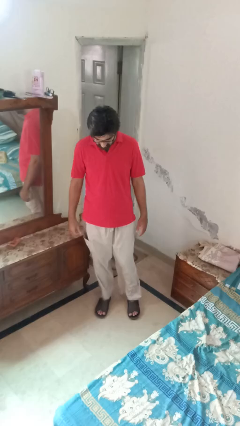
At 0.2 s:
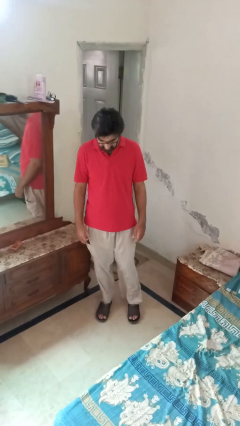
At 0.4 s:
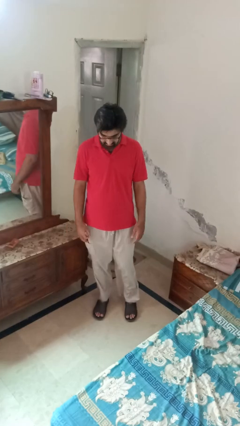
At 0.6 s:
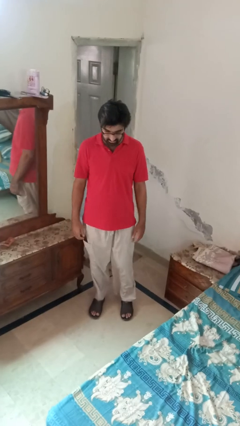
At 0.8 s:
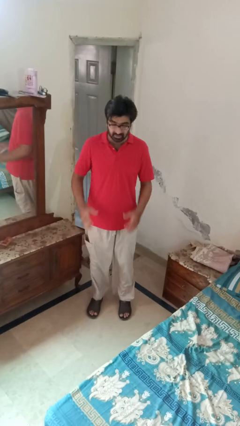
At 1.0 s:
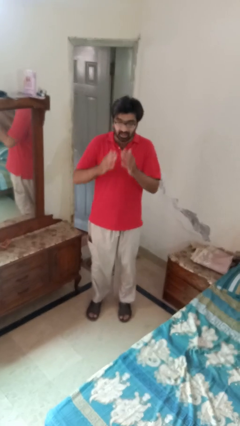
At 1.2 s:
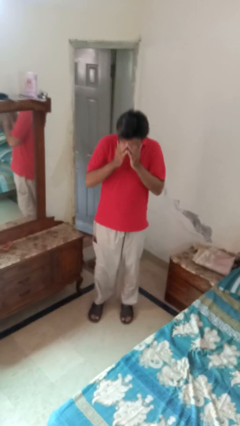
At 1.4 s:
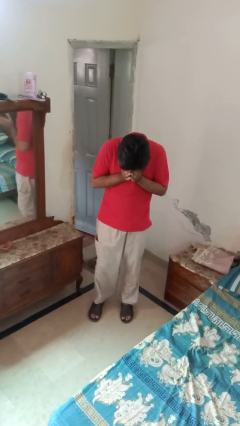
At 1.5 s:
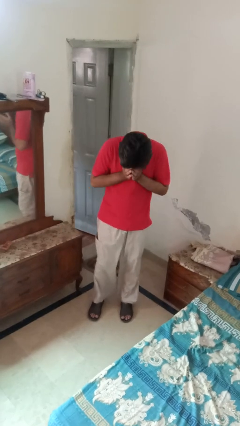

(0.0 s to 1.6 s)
person sneezes into hand

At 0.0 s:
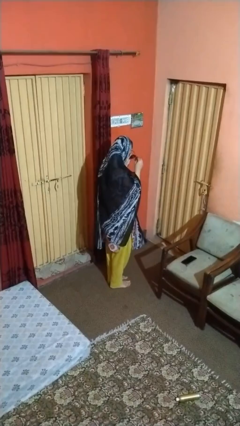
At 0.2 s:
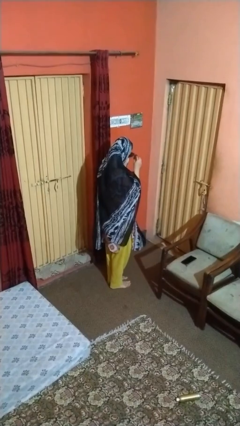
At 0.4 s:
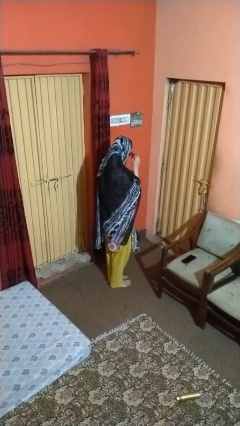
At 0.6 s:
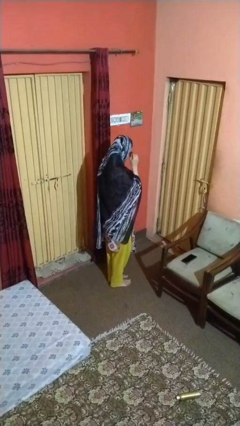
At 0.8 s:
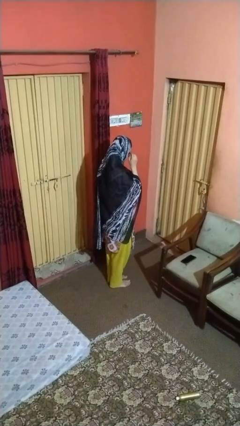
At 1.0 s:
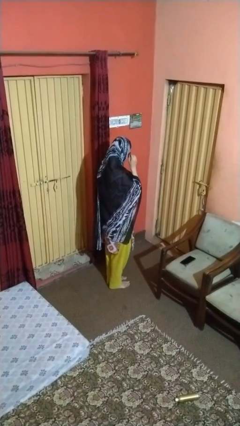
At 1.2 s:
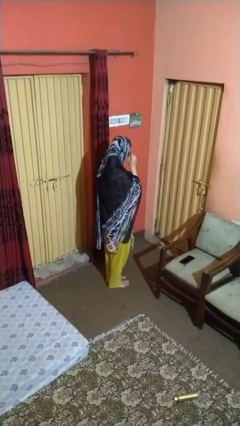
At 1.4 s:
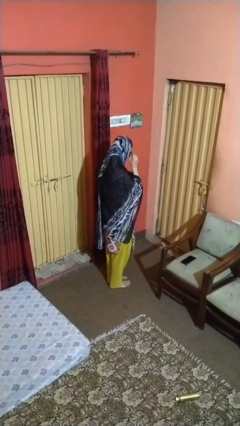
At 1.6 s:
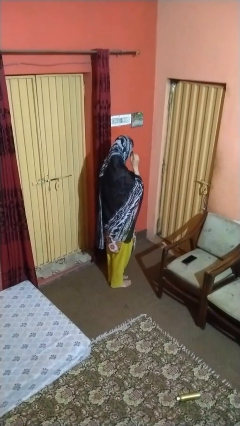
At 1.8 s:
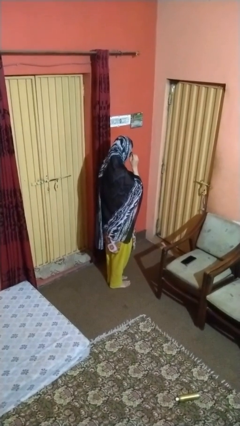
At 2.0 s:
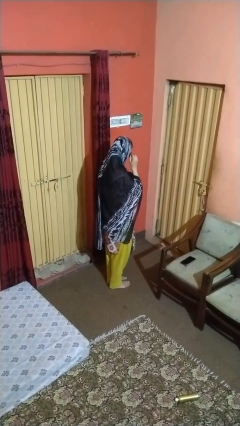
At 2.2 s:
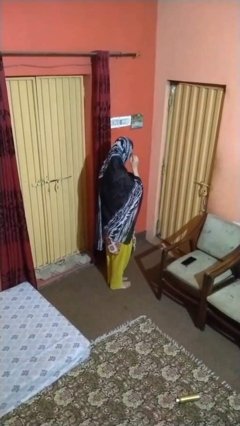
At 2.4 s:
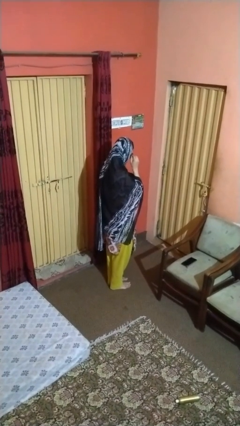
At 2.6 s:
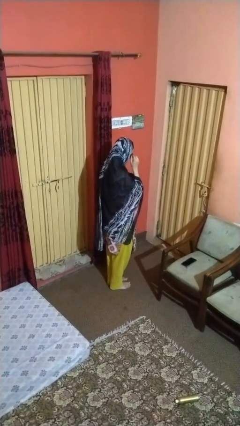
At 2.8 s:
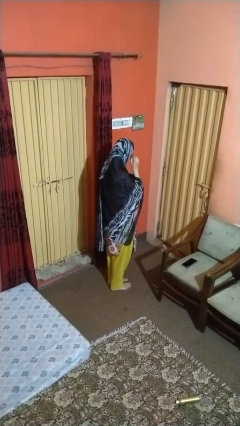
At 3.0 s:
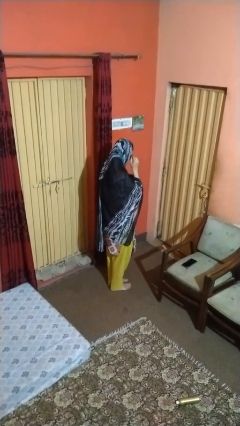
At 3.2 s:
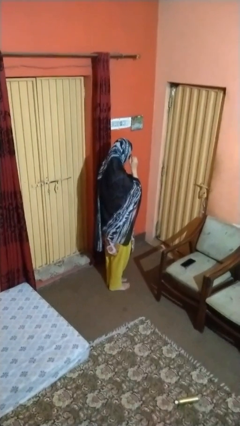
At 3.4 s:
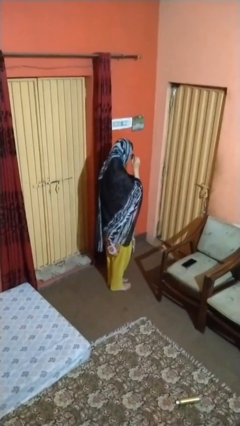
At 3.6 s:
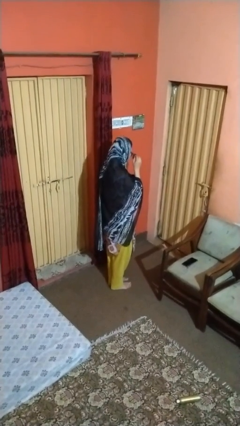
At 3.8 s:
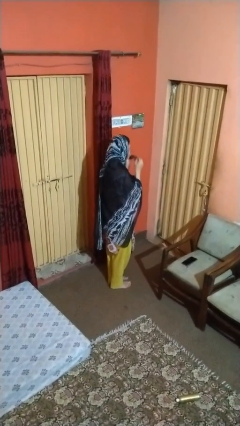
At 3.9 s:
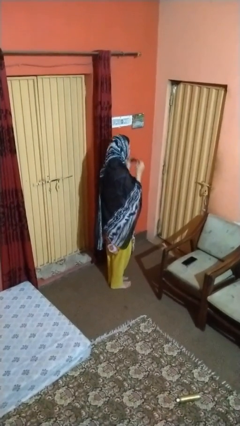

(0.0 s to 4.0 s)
person puts on sunglasses

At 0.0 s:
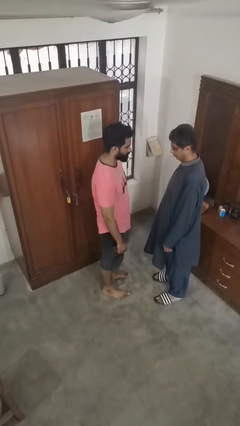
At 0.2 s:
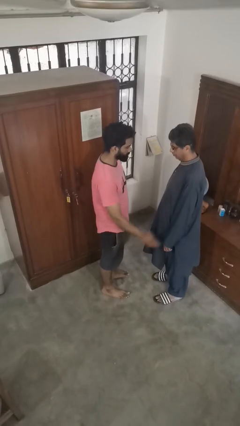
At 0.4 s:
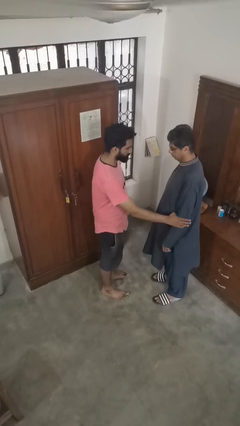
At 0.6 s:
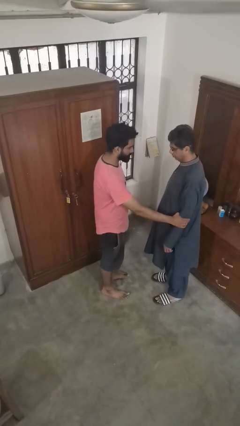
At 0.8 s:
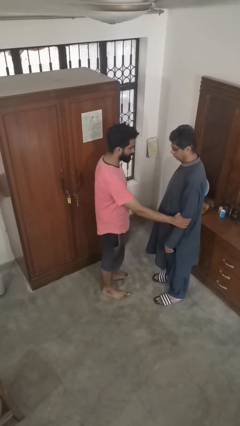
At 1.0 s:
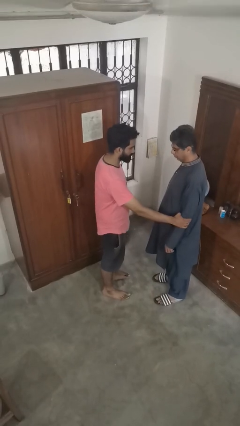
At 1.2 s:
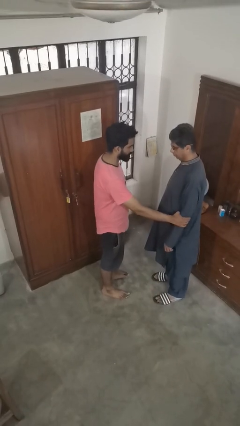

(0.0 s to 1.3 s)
person grabs person by forearm

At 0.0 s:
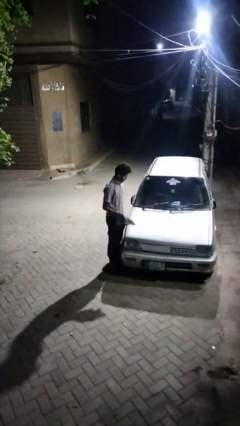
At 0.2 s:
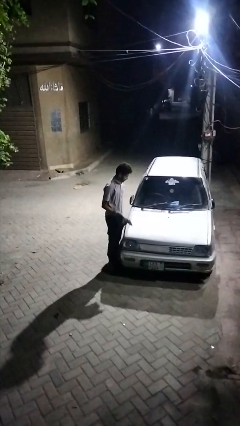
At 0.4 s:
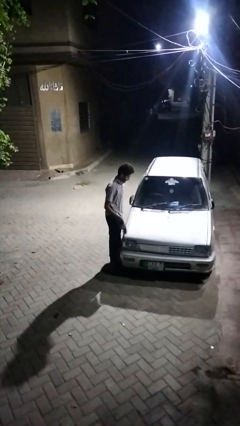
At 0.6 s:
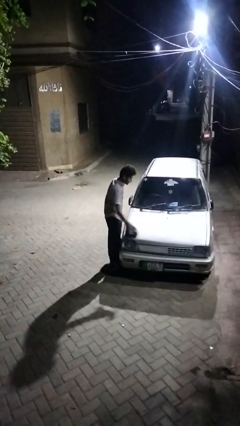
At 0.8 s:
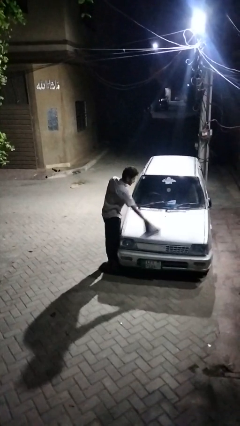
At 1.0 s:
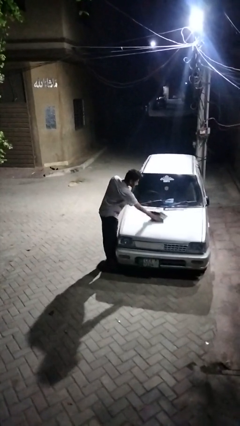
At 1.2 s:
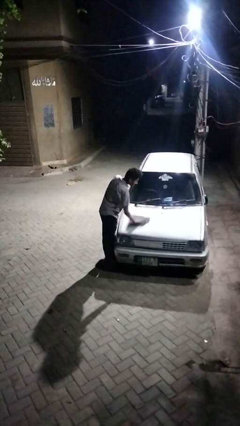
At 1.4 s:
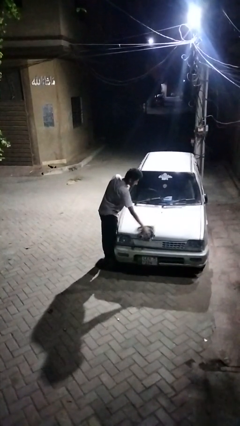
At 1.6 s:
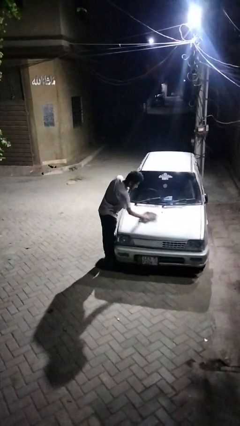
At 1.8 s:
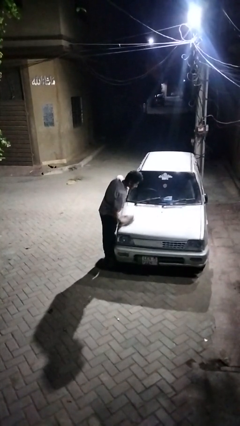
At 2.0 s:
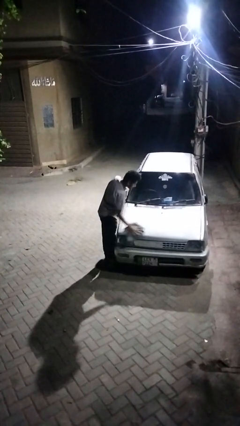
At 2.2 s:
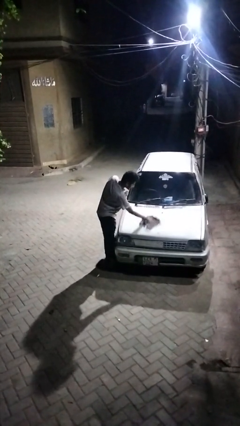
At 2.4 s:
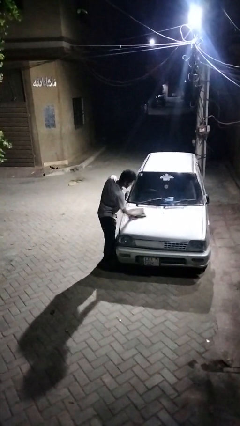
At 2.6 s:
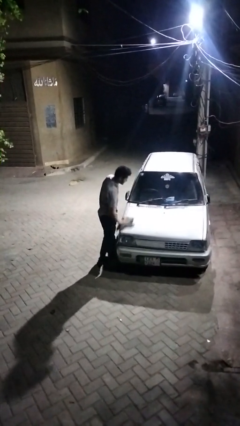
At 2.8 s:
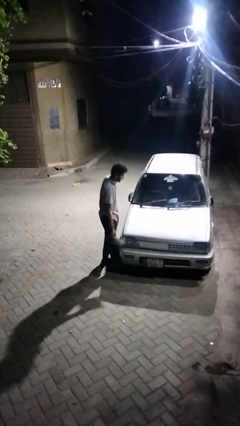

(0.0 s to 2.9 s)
person polishes car with rag

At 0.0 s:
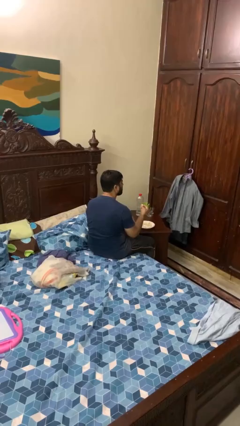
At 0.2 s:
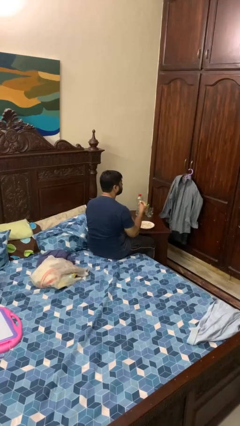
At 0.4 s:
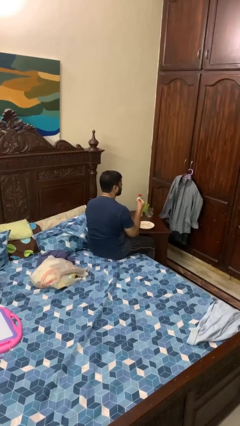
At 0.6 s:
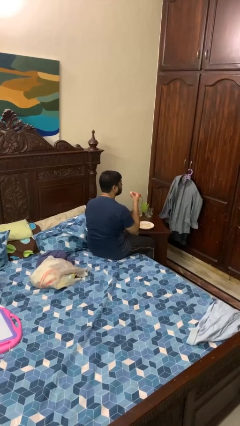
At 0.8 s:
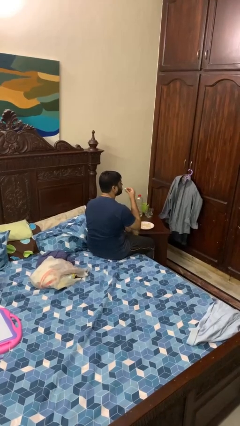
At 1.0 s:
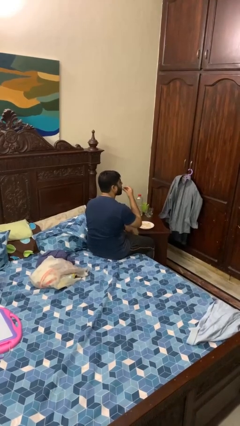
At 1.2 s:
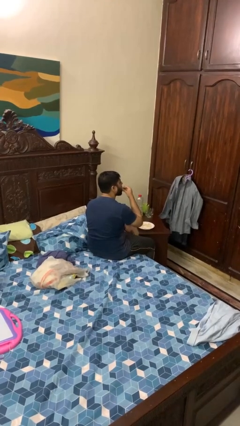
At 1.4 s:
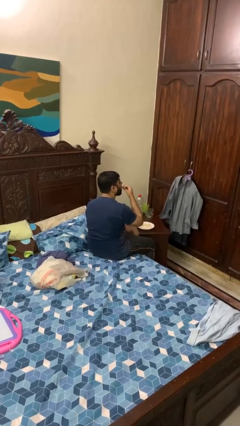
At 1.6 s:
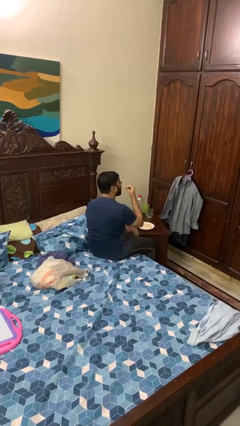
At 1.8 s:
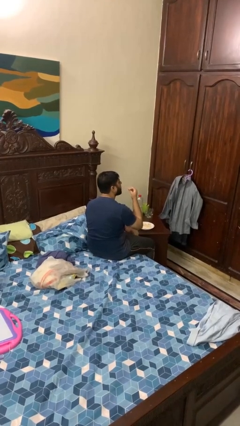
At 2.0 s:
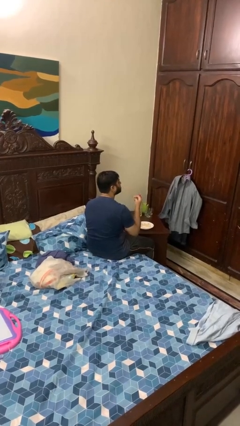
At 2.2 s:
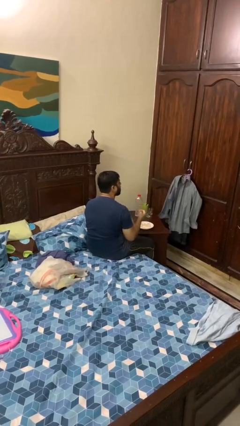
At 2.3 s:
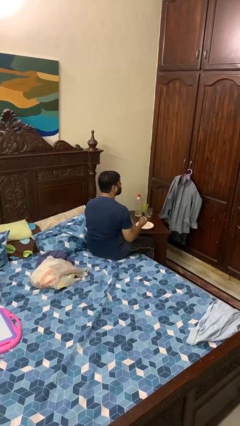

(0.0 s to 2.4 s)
person eats with hands

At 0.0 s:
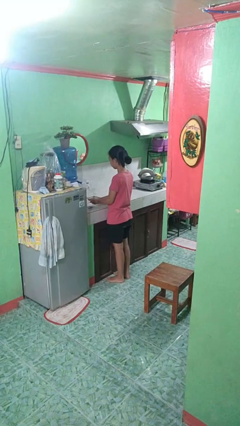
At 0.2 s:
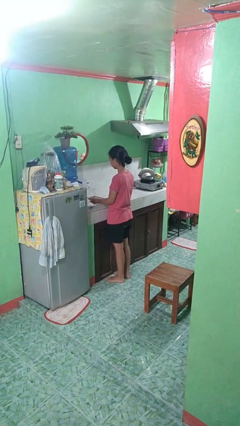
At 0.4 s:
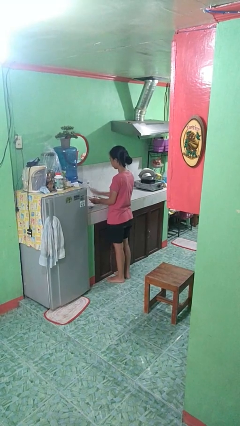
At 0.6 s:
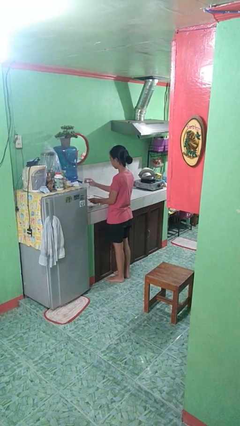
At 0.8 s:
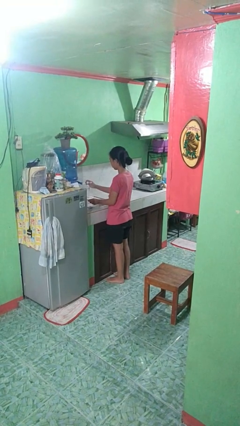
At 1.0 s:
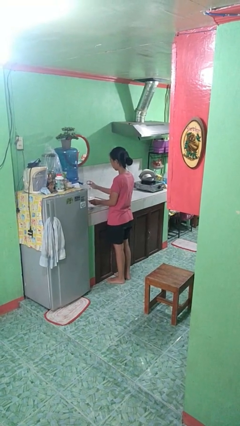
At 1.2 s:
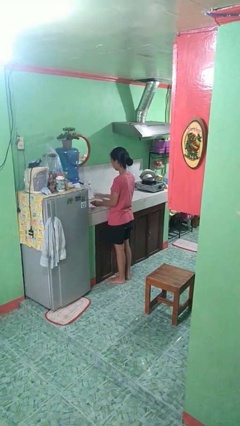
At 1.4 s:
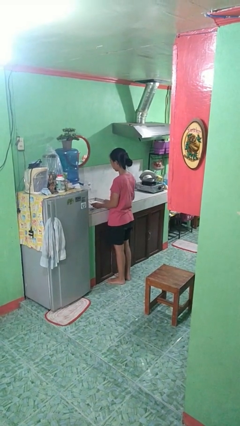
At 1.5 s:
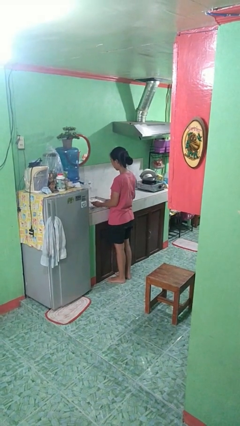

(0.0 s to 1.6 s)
person washes dish

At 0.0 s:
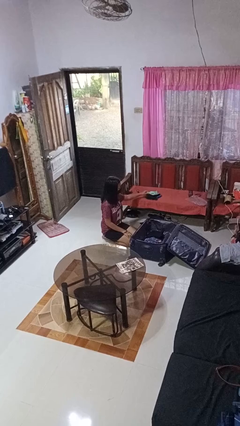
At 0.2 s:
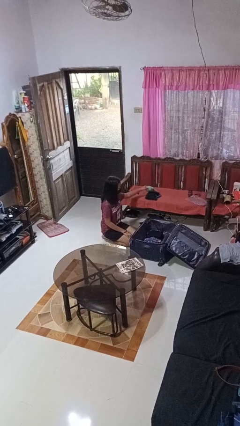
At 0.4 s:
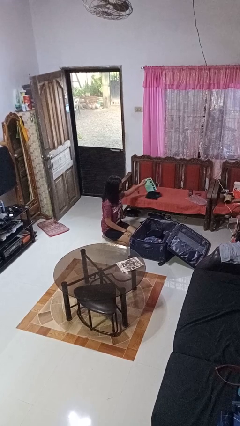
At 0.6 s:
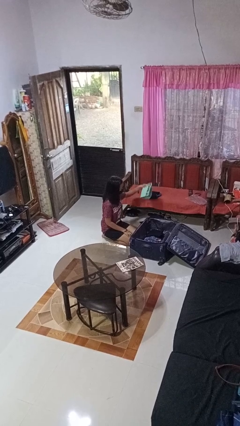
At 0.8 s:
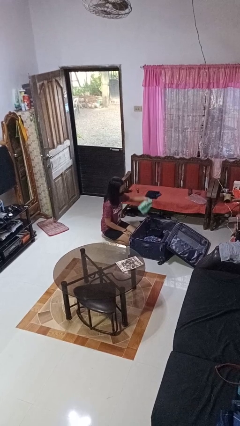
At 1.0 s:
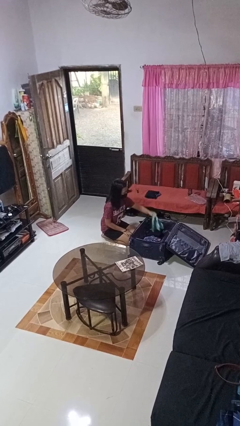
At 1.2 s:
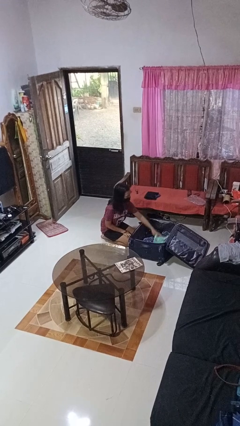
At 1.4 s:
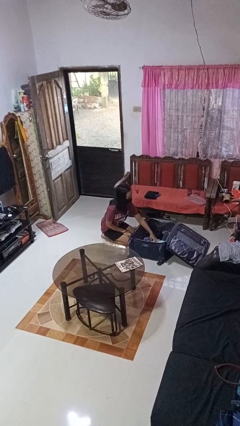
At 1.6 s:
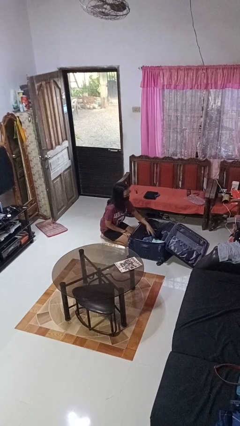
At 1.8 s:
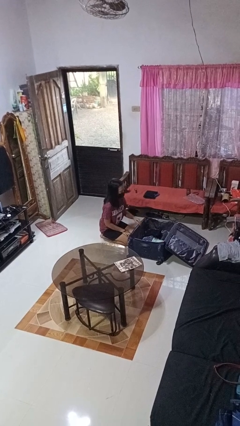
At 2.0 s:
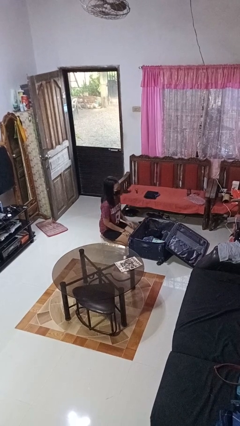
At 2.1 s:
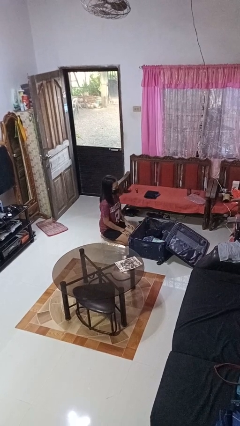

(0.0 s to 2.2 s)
person loads clothes into suitcase

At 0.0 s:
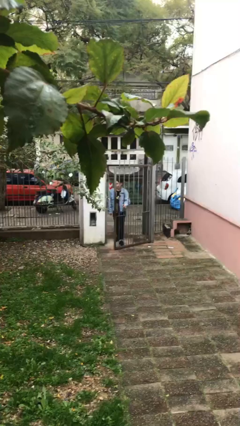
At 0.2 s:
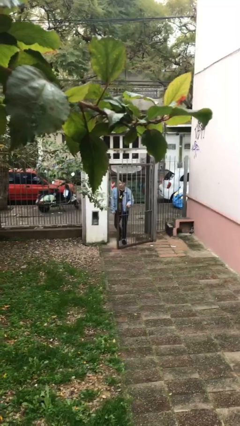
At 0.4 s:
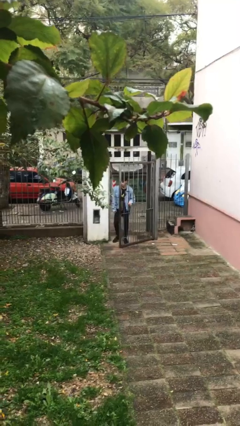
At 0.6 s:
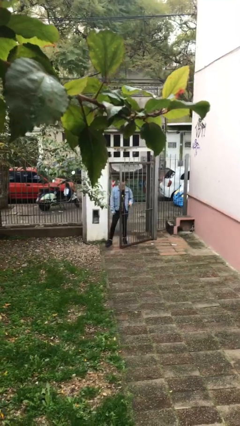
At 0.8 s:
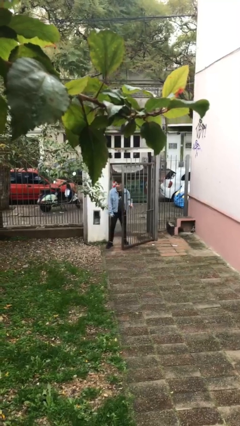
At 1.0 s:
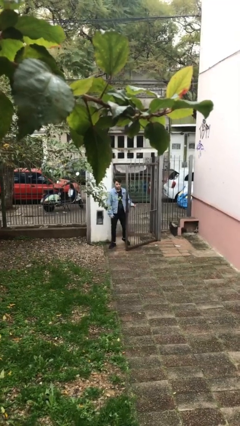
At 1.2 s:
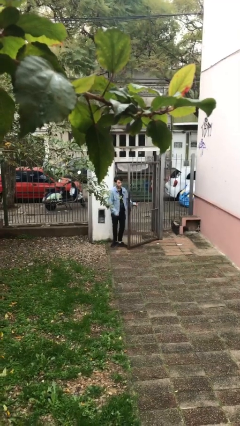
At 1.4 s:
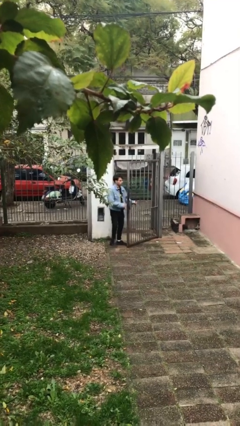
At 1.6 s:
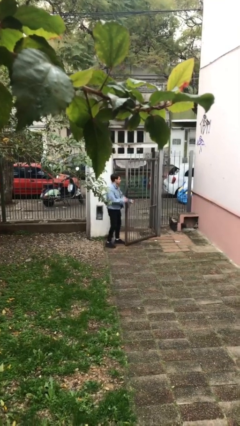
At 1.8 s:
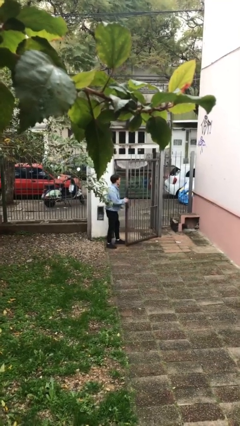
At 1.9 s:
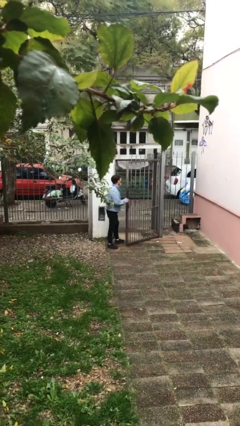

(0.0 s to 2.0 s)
person enters scene through structure
